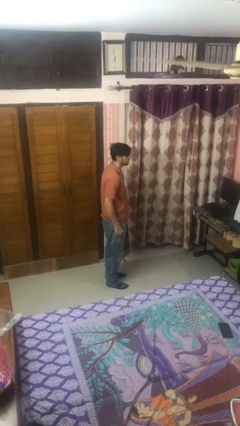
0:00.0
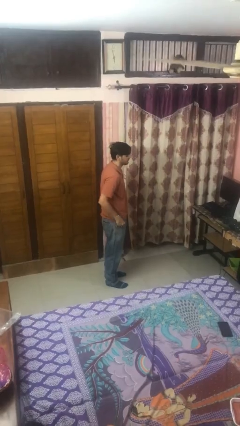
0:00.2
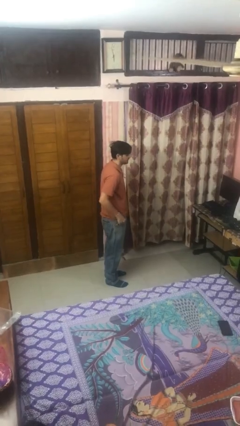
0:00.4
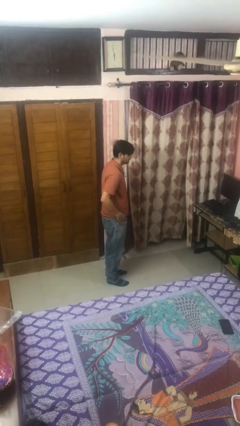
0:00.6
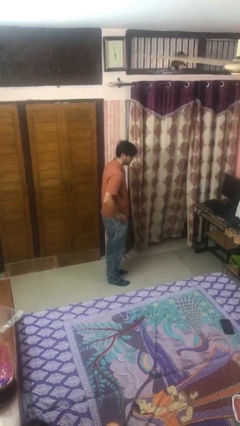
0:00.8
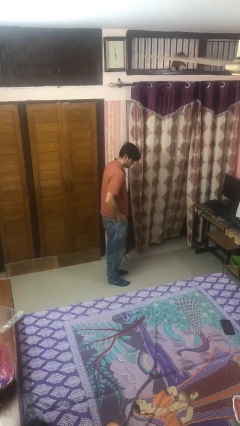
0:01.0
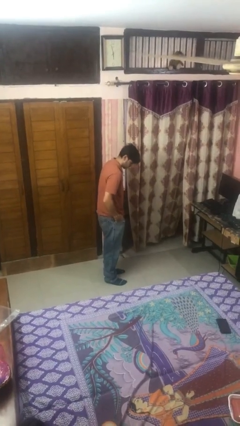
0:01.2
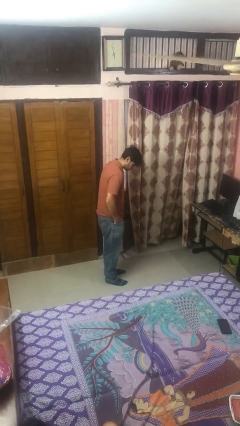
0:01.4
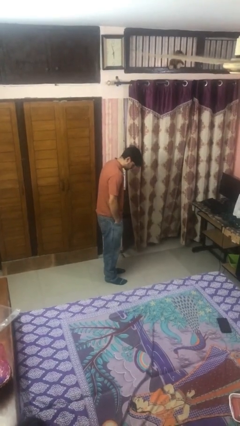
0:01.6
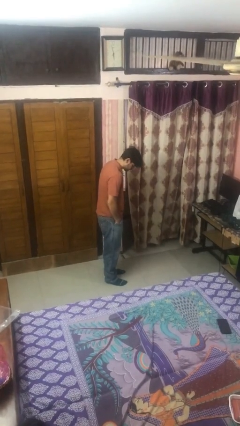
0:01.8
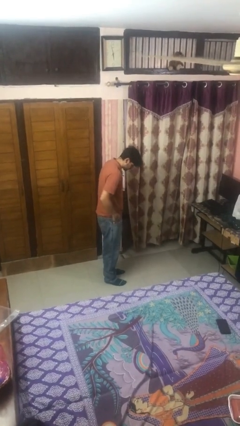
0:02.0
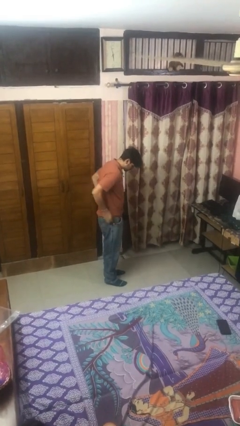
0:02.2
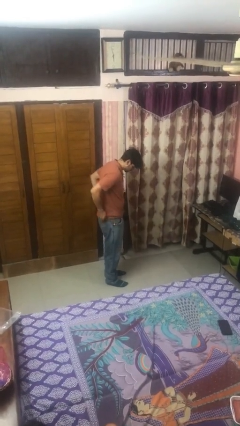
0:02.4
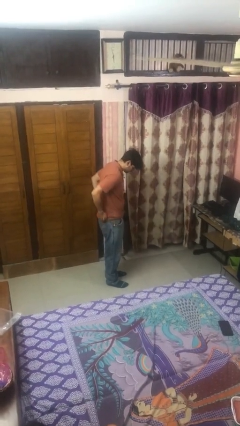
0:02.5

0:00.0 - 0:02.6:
person puts hands in back pockets

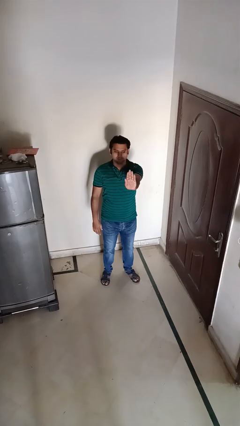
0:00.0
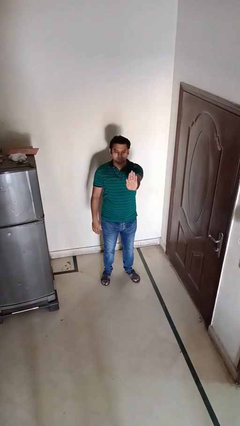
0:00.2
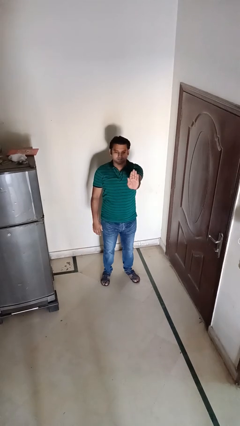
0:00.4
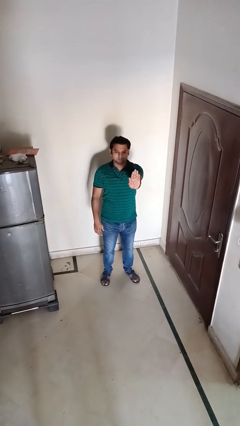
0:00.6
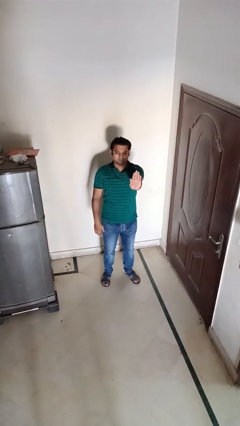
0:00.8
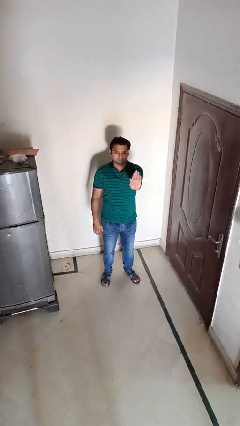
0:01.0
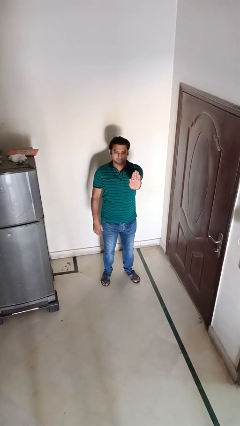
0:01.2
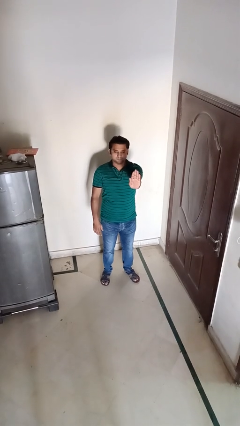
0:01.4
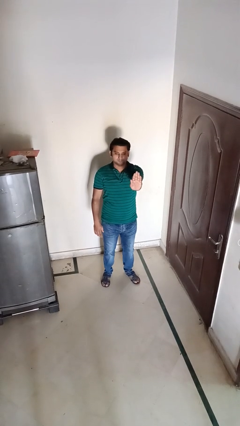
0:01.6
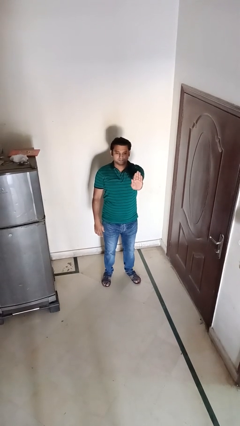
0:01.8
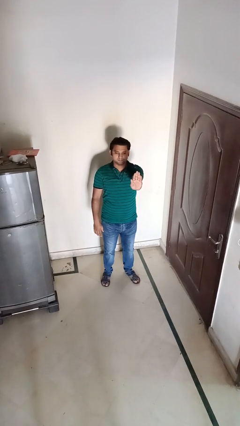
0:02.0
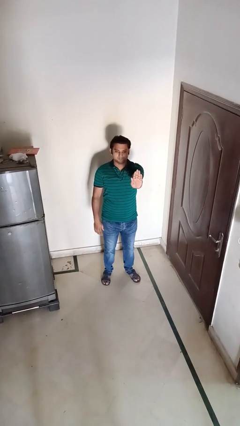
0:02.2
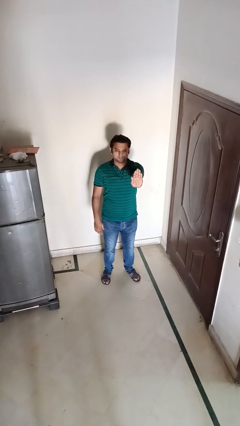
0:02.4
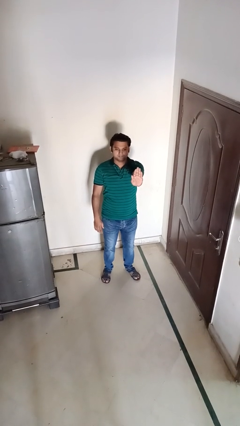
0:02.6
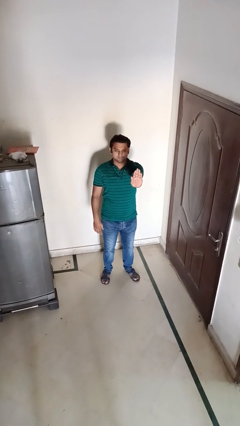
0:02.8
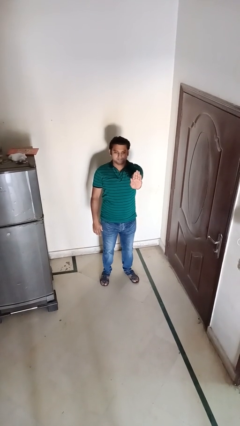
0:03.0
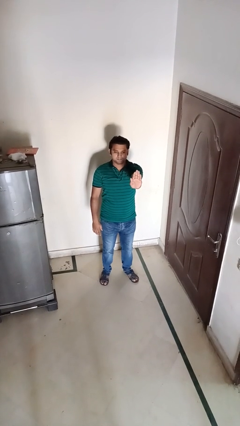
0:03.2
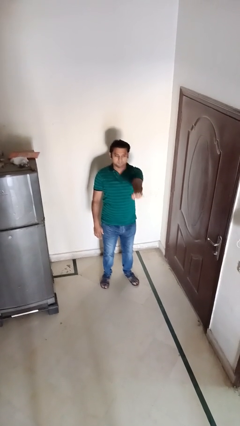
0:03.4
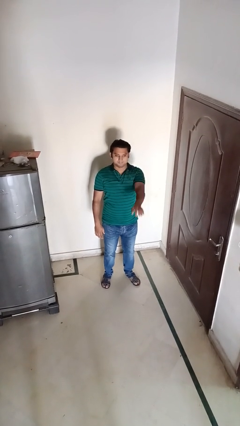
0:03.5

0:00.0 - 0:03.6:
person gestures stop

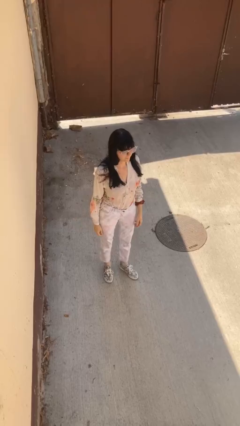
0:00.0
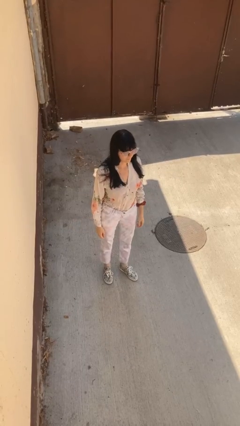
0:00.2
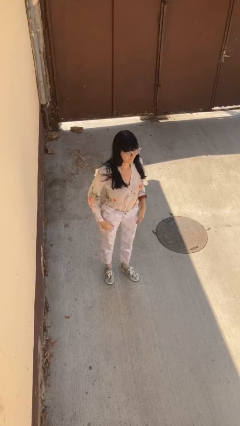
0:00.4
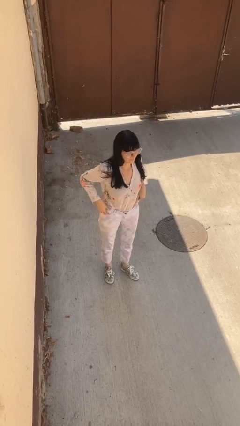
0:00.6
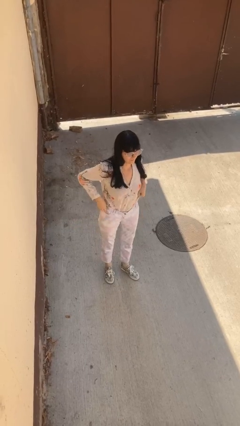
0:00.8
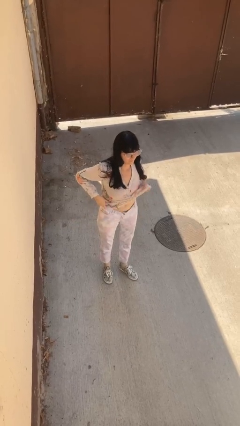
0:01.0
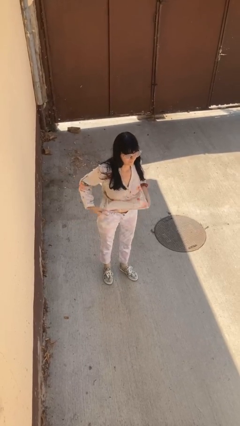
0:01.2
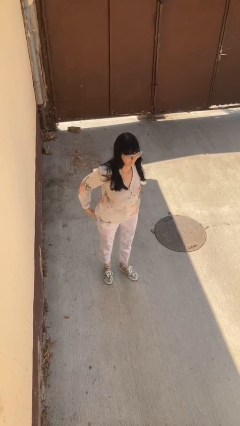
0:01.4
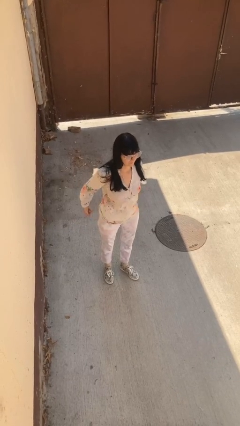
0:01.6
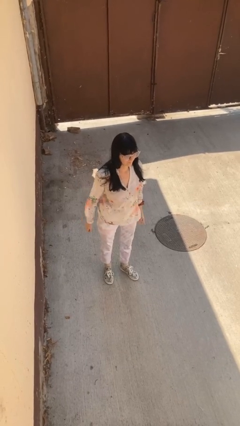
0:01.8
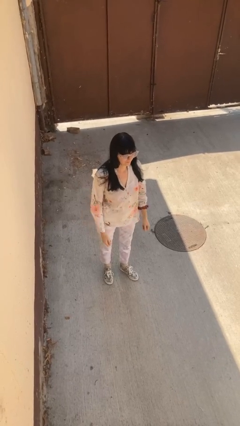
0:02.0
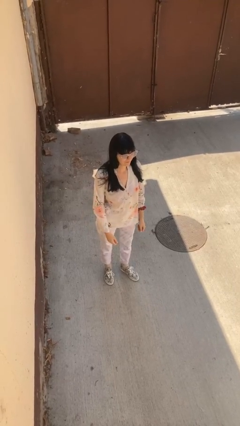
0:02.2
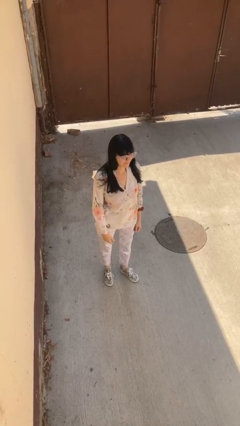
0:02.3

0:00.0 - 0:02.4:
person untucks shirt

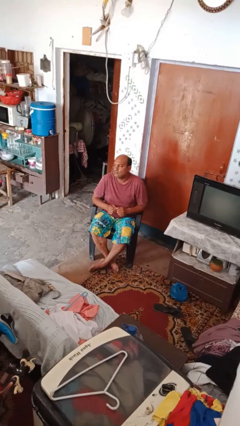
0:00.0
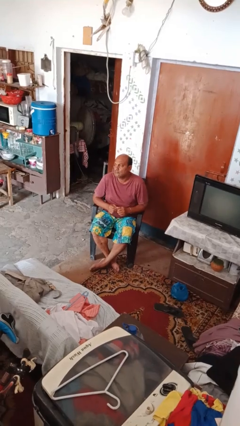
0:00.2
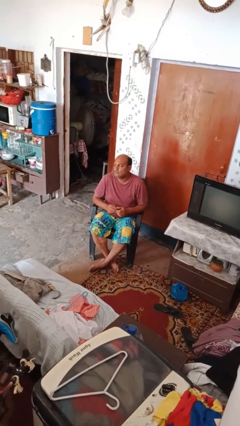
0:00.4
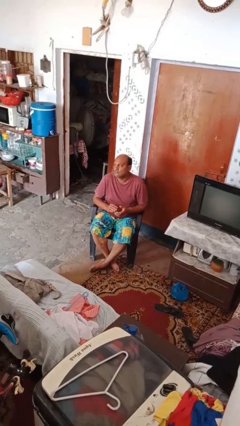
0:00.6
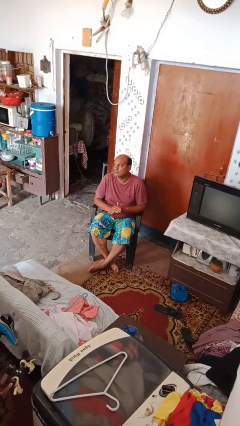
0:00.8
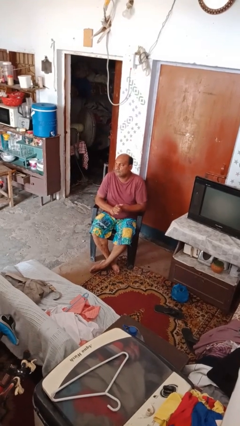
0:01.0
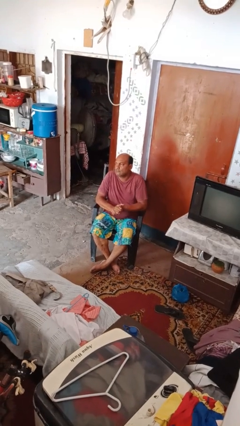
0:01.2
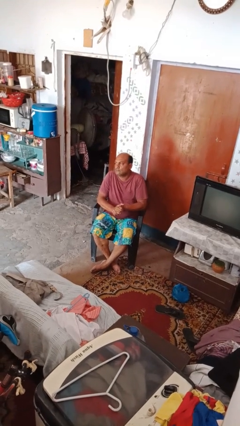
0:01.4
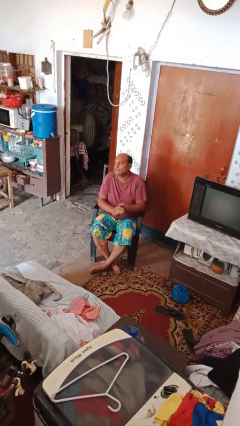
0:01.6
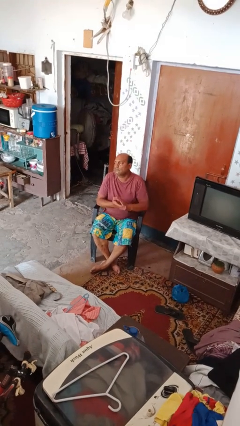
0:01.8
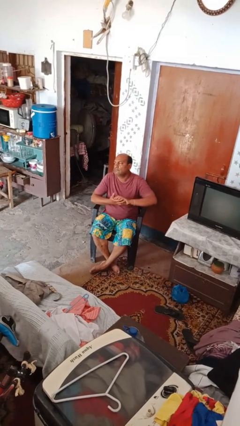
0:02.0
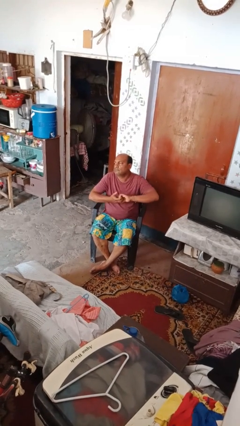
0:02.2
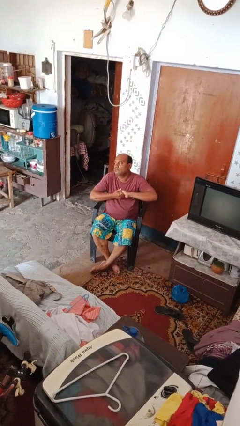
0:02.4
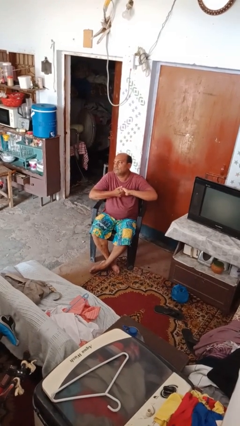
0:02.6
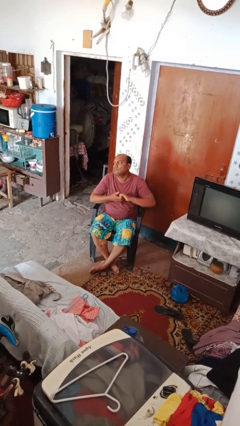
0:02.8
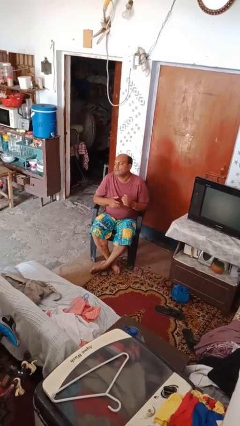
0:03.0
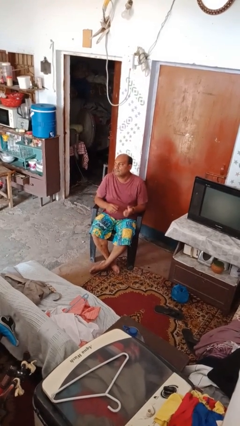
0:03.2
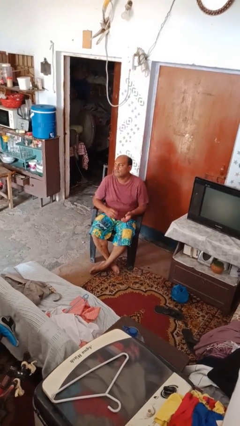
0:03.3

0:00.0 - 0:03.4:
person cracks knuckles

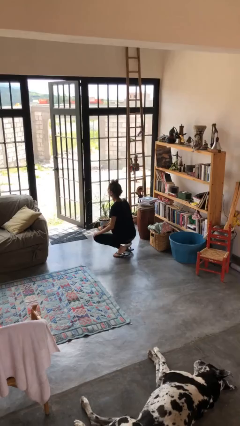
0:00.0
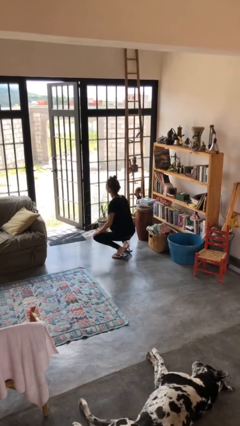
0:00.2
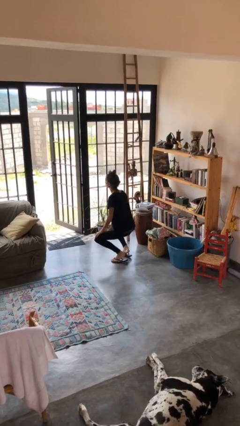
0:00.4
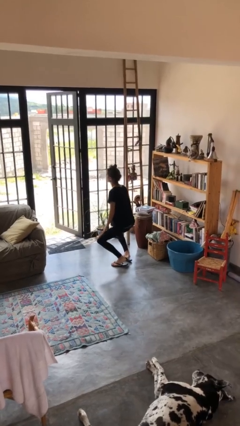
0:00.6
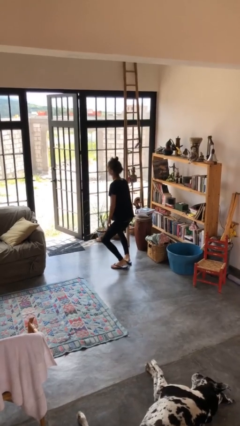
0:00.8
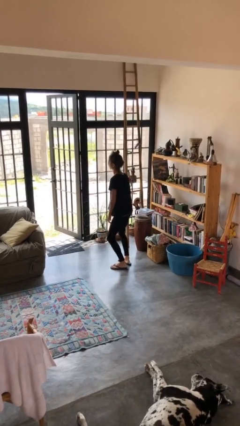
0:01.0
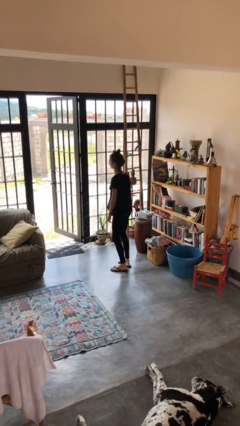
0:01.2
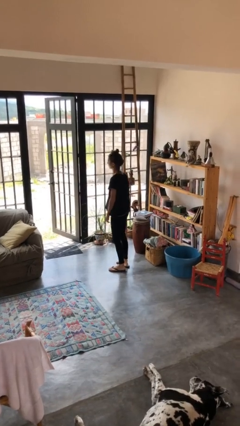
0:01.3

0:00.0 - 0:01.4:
person stands up

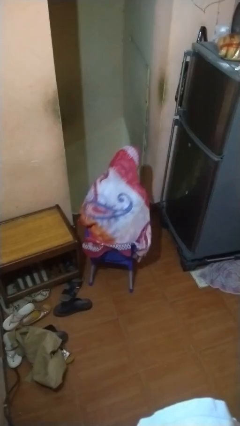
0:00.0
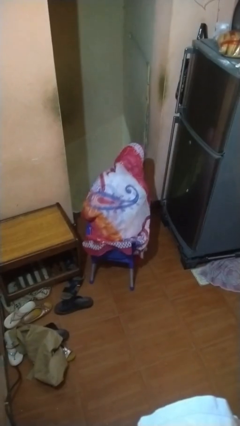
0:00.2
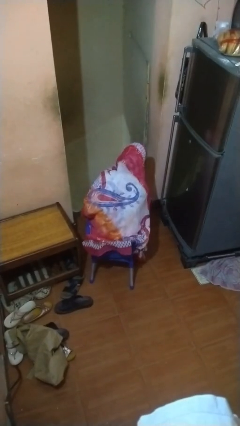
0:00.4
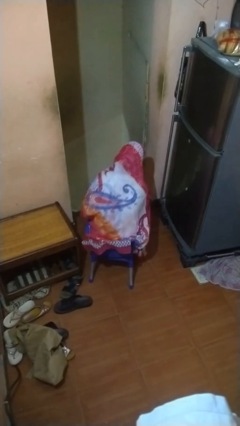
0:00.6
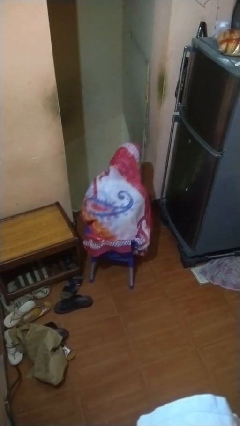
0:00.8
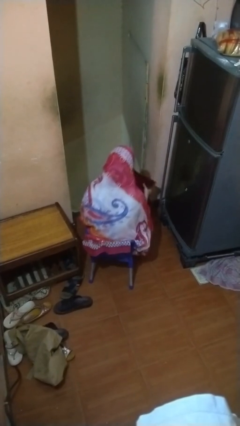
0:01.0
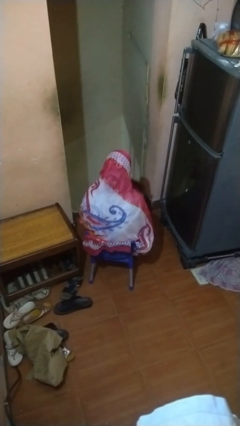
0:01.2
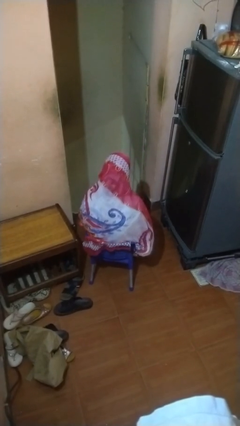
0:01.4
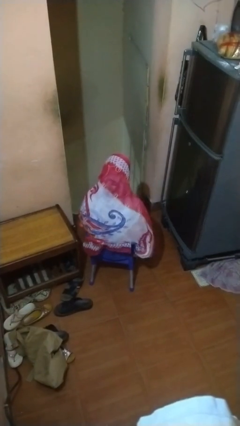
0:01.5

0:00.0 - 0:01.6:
person picks up object from floor

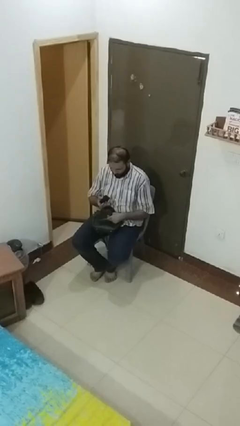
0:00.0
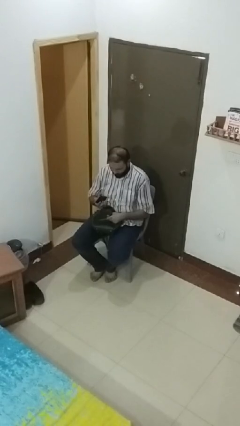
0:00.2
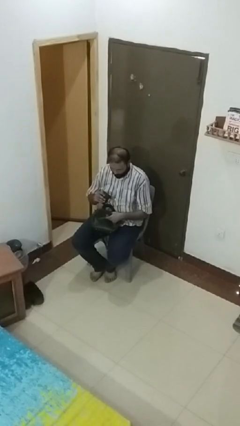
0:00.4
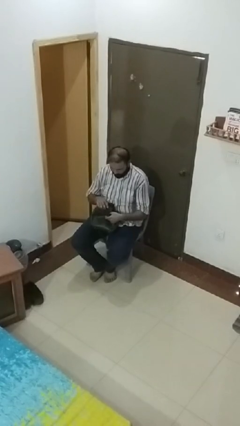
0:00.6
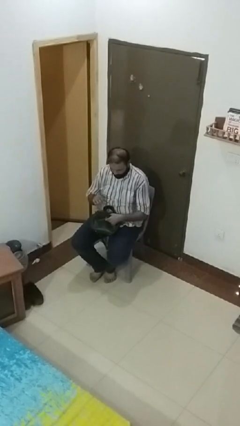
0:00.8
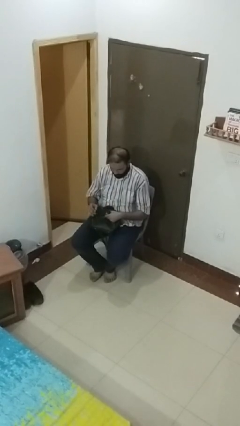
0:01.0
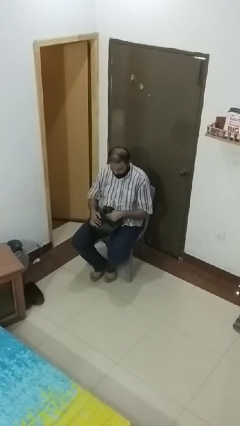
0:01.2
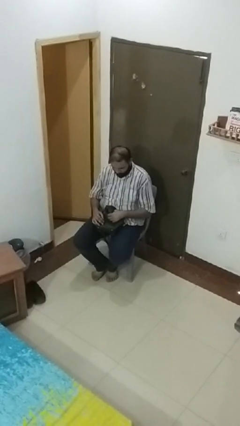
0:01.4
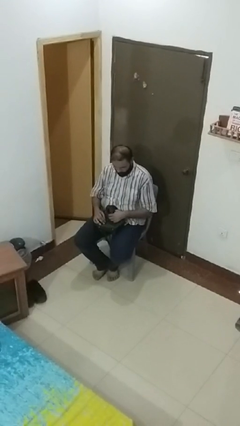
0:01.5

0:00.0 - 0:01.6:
person puts object into purse

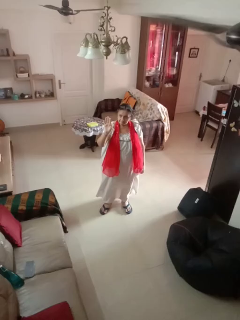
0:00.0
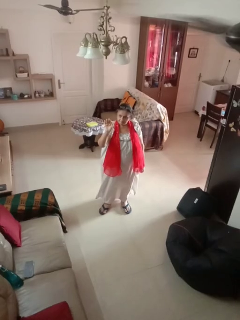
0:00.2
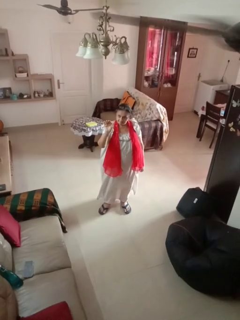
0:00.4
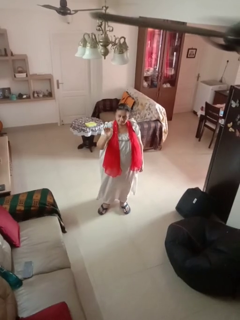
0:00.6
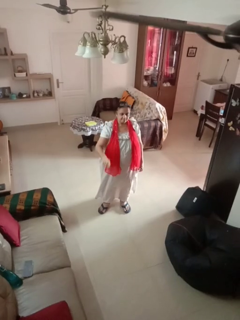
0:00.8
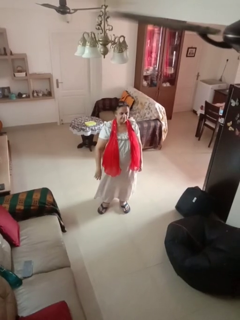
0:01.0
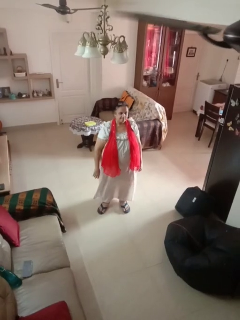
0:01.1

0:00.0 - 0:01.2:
person gestures come here
